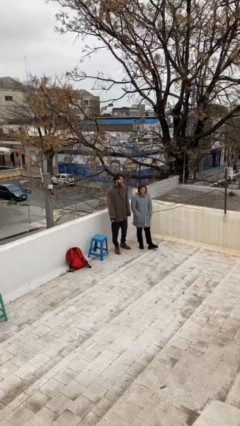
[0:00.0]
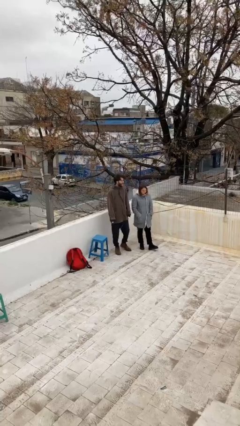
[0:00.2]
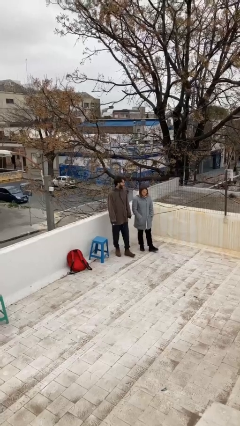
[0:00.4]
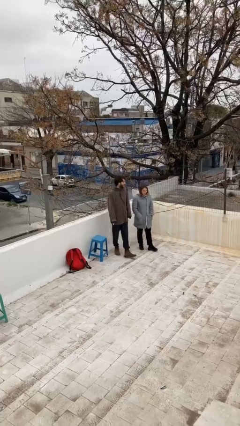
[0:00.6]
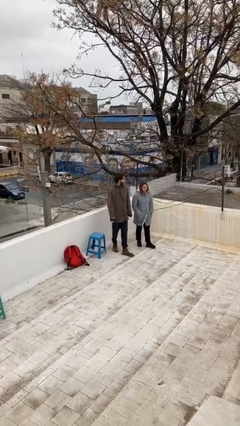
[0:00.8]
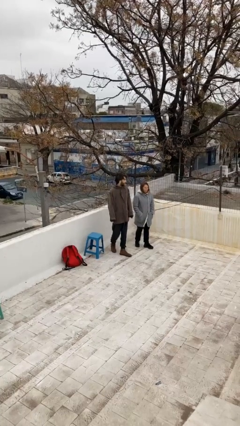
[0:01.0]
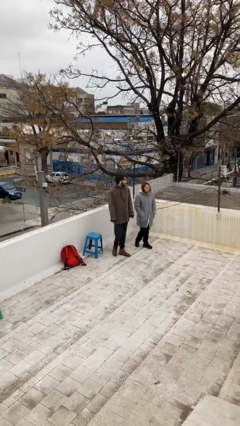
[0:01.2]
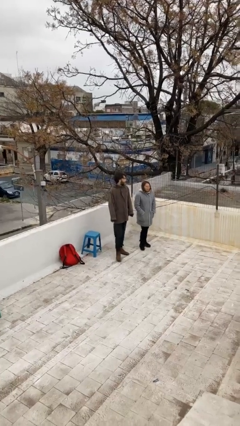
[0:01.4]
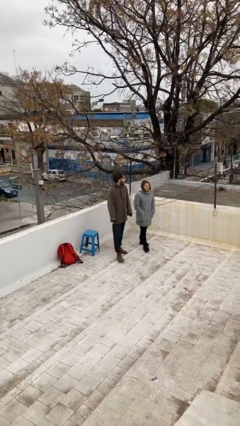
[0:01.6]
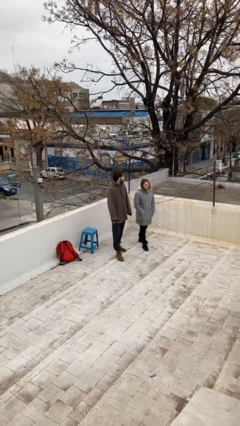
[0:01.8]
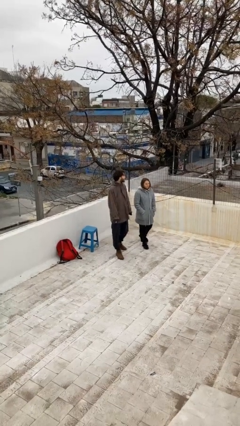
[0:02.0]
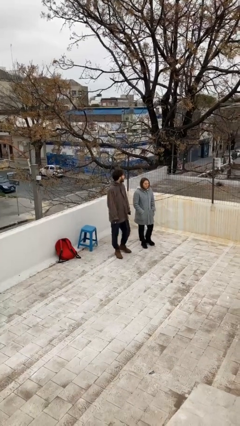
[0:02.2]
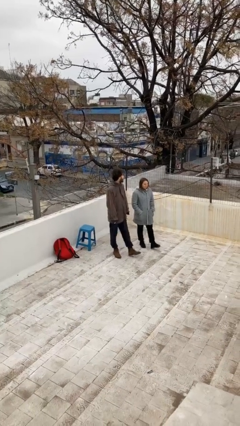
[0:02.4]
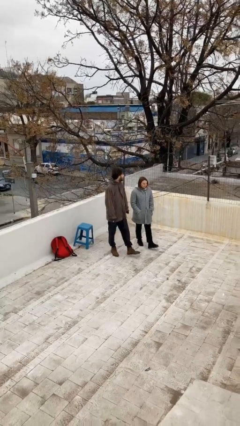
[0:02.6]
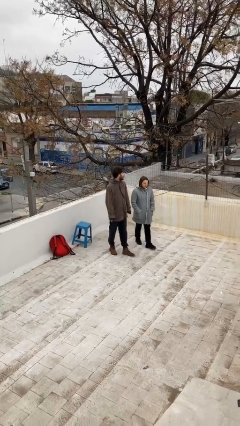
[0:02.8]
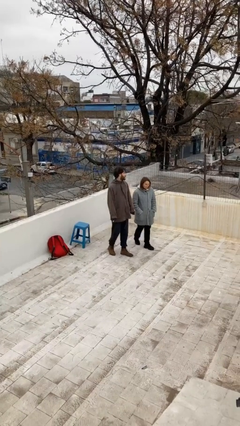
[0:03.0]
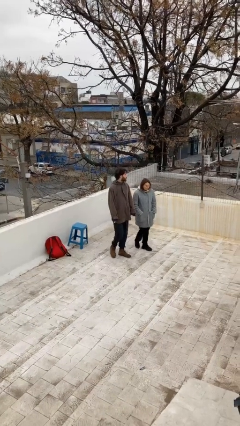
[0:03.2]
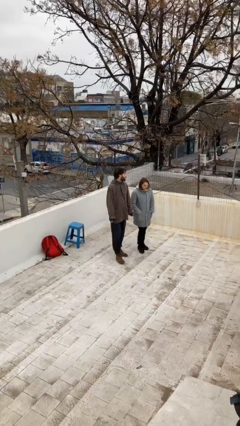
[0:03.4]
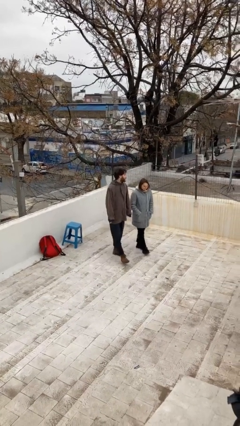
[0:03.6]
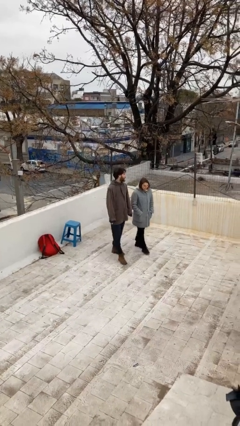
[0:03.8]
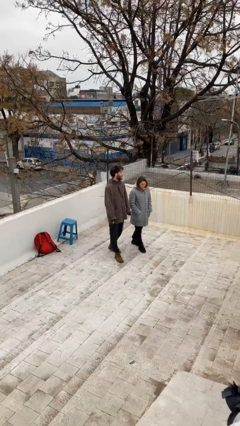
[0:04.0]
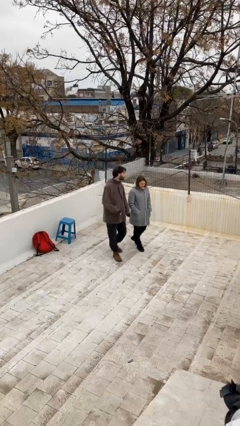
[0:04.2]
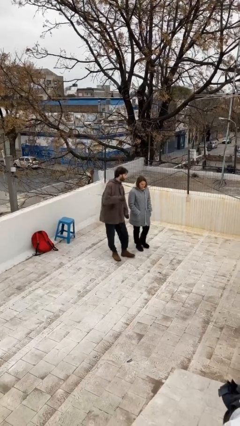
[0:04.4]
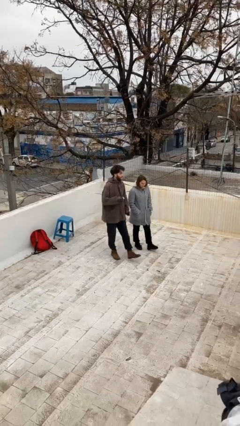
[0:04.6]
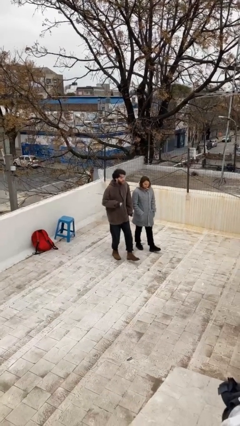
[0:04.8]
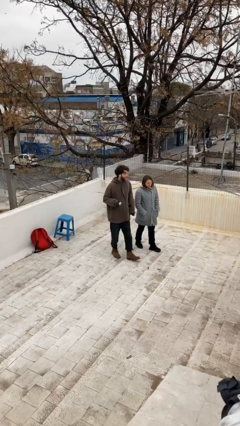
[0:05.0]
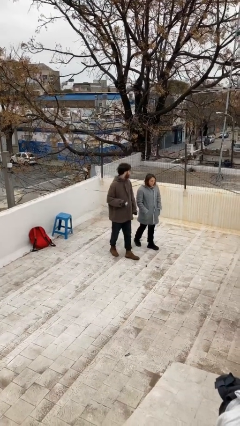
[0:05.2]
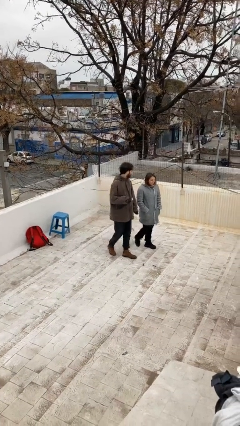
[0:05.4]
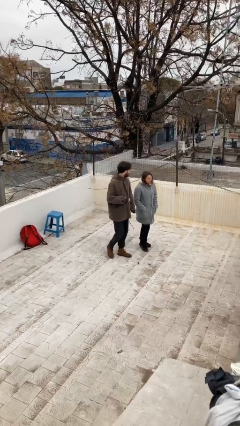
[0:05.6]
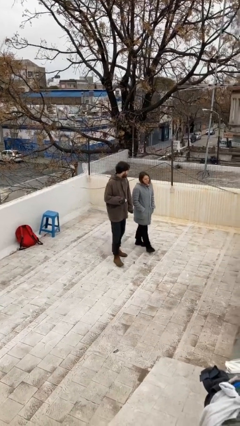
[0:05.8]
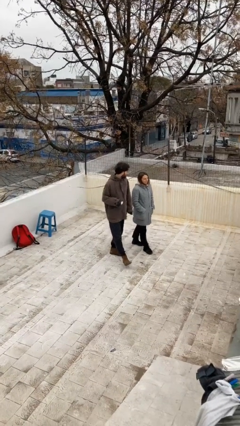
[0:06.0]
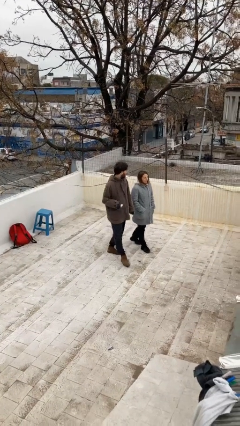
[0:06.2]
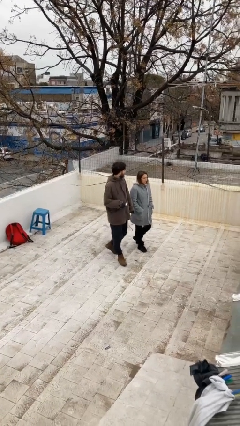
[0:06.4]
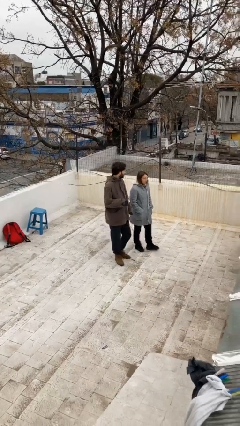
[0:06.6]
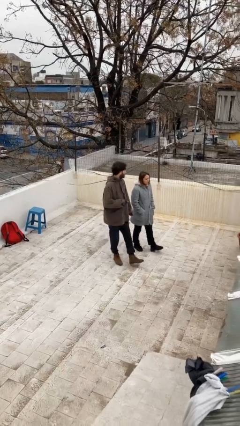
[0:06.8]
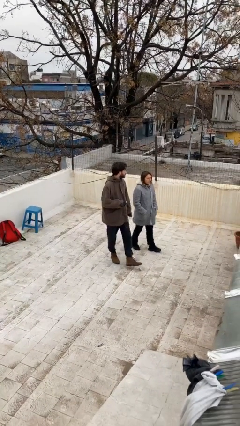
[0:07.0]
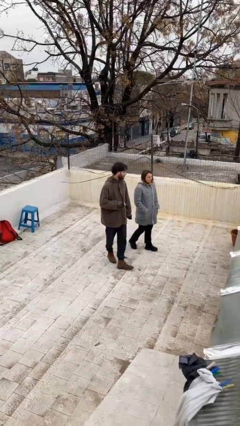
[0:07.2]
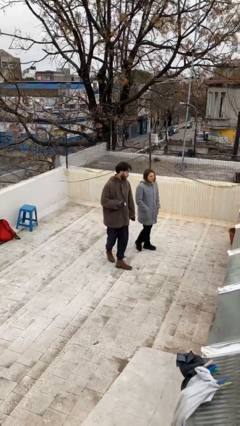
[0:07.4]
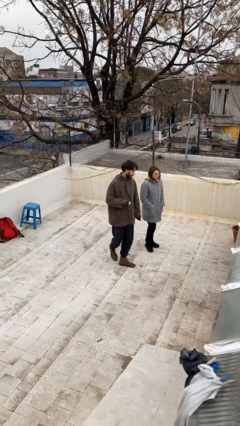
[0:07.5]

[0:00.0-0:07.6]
person talks to person

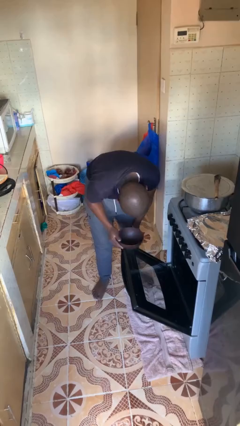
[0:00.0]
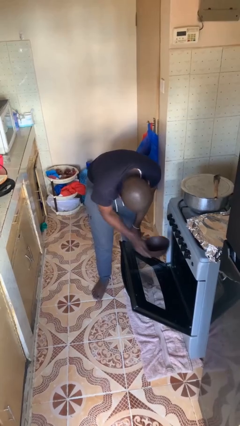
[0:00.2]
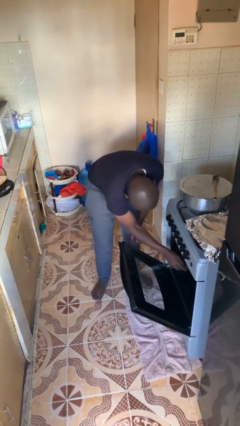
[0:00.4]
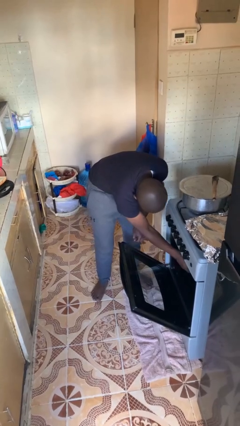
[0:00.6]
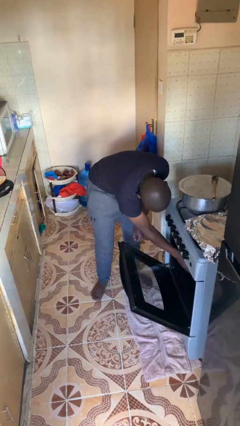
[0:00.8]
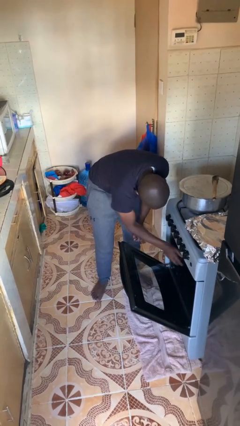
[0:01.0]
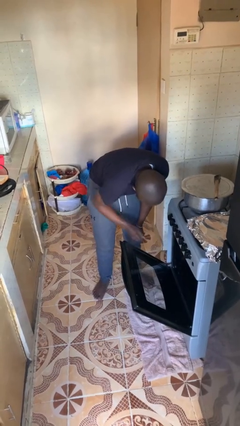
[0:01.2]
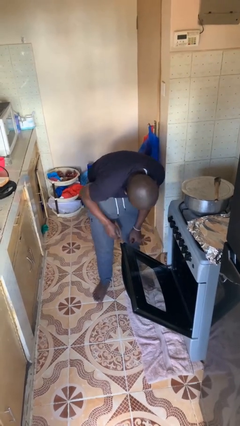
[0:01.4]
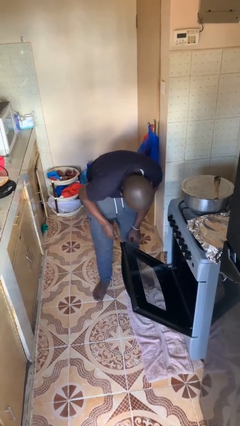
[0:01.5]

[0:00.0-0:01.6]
person puts object into oven

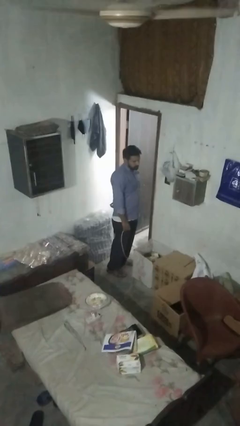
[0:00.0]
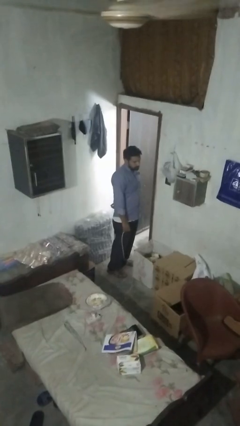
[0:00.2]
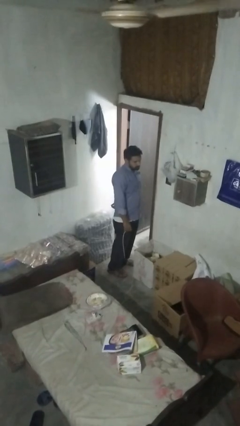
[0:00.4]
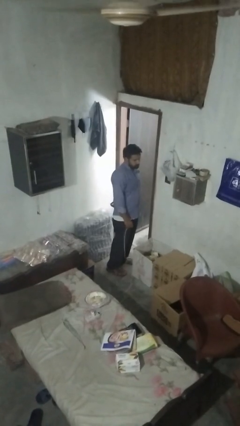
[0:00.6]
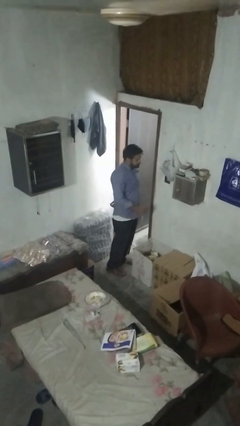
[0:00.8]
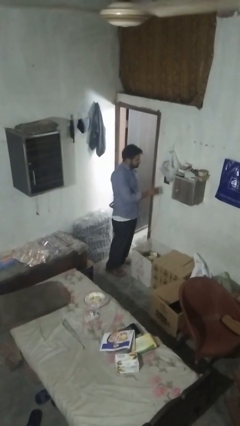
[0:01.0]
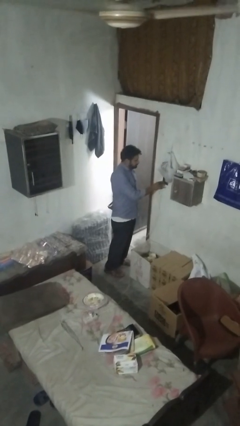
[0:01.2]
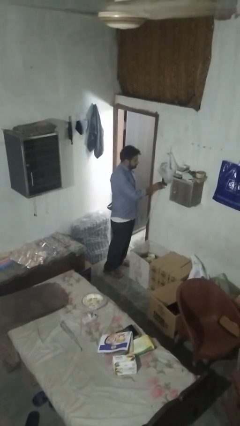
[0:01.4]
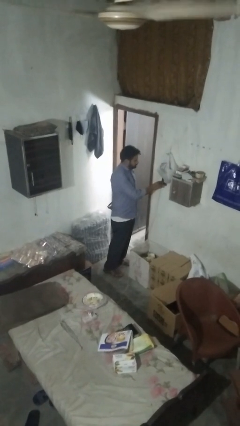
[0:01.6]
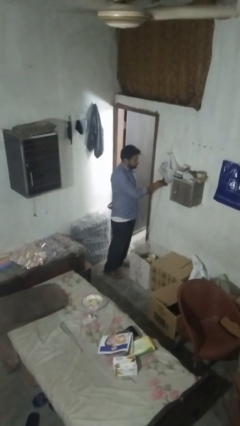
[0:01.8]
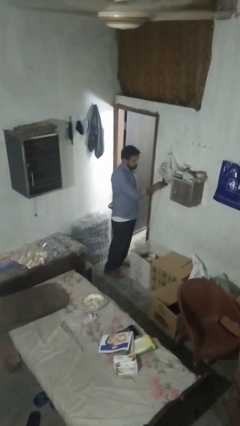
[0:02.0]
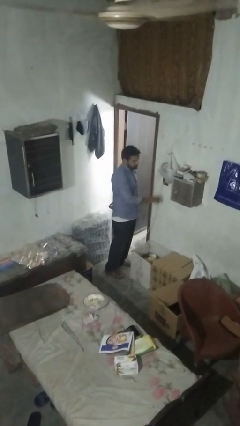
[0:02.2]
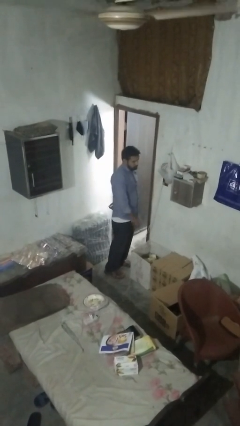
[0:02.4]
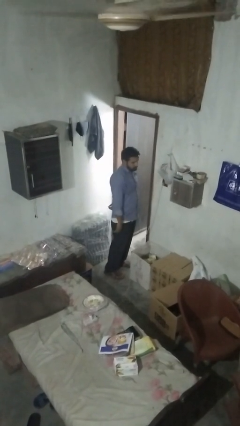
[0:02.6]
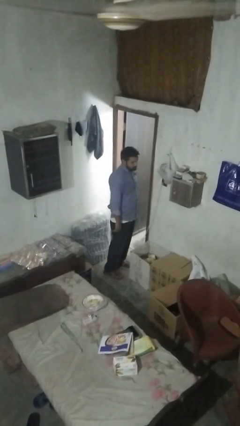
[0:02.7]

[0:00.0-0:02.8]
person plugs into electrical socket

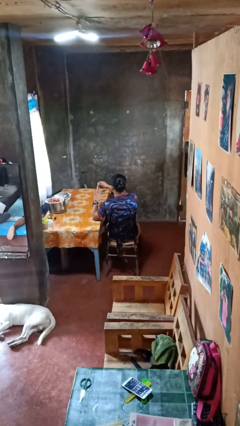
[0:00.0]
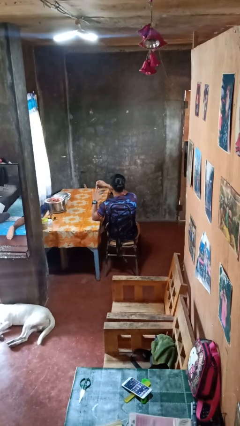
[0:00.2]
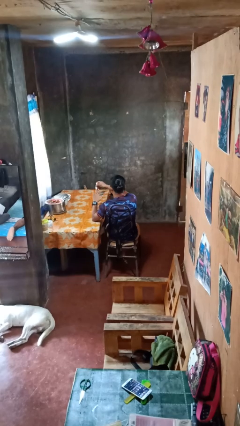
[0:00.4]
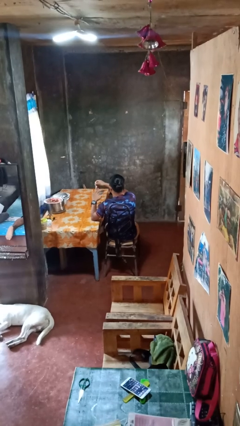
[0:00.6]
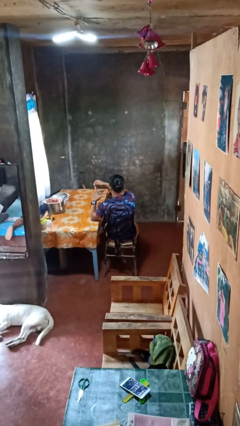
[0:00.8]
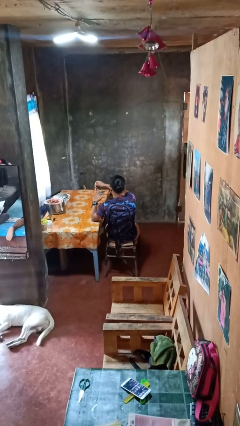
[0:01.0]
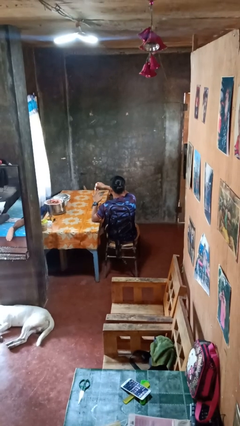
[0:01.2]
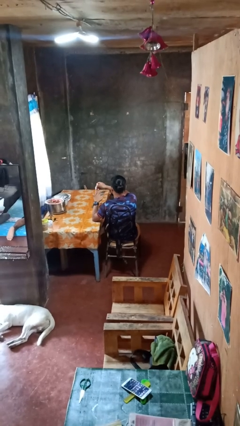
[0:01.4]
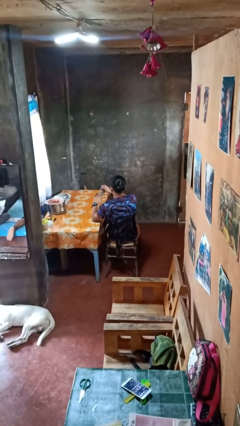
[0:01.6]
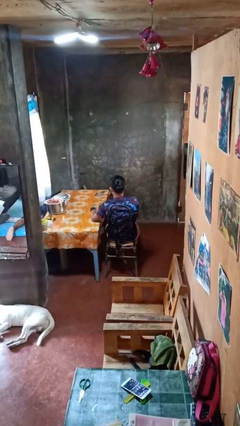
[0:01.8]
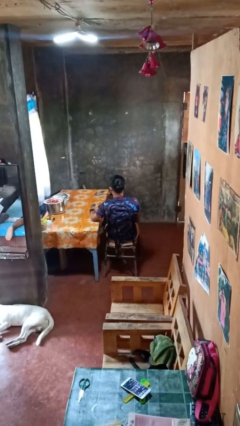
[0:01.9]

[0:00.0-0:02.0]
person clips fingernails

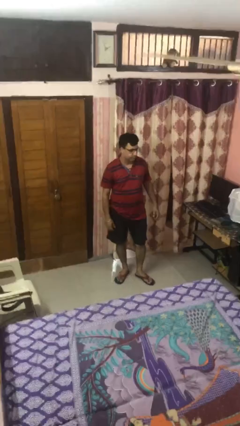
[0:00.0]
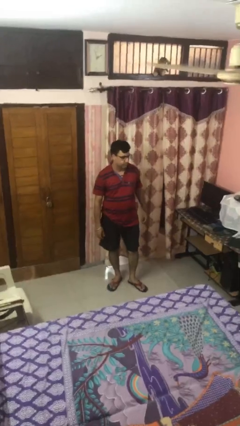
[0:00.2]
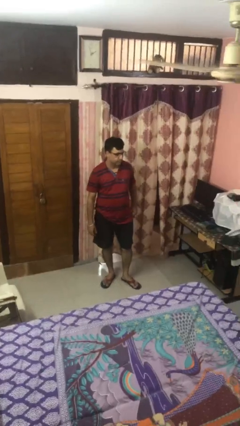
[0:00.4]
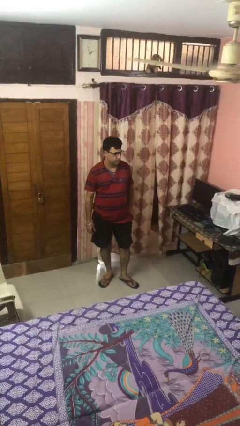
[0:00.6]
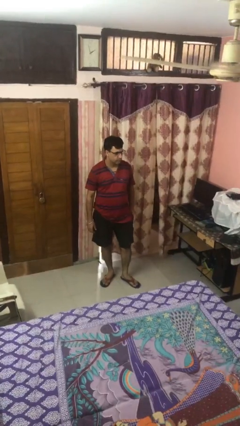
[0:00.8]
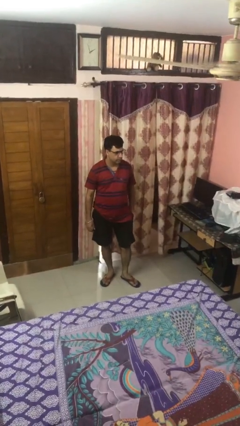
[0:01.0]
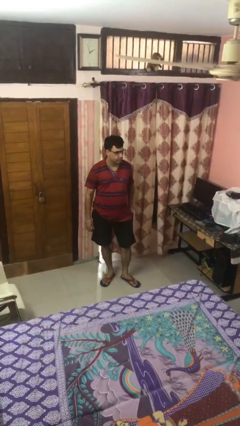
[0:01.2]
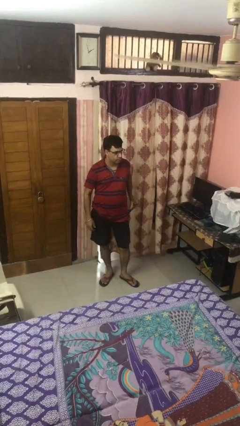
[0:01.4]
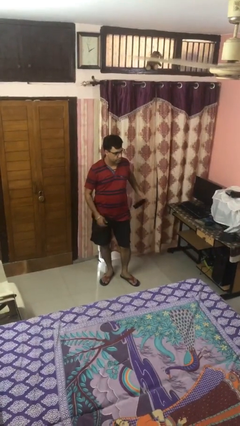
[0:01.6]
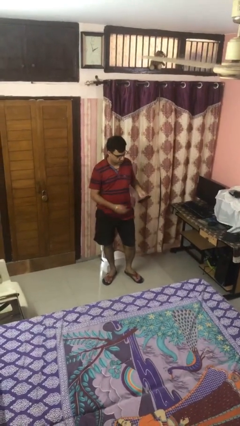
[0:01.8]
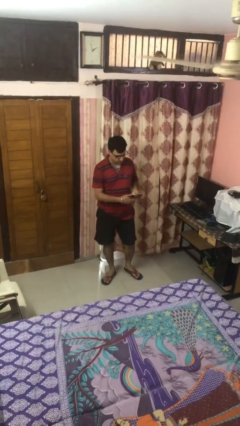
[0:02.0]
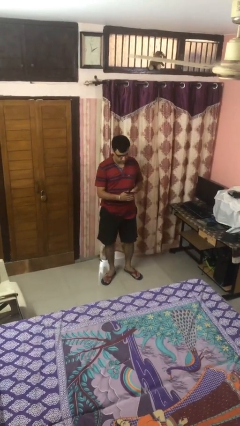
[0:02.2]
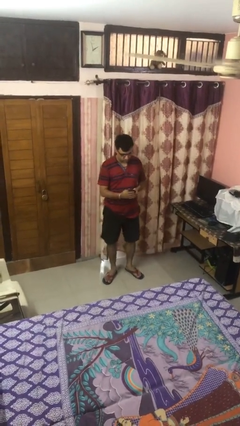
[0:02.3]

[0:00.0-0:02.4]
person takes phone from pocket

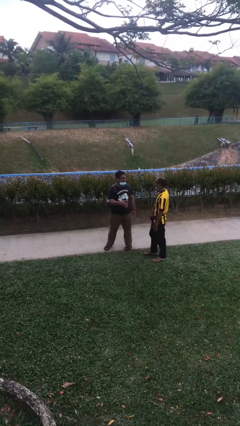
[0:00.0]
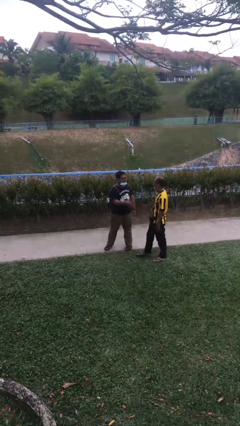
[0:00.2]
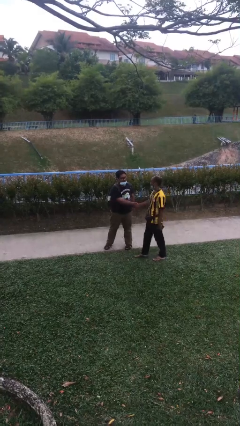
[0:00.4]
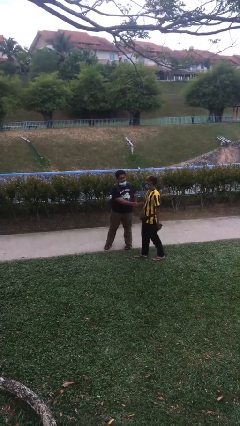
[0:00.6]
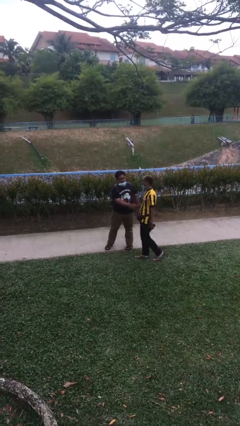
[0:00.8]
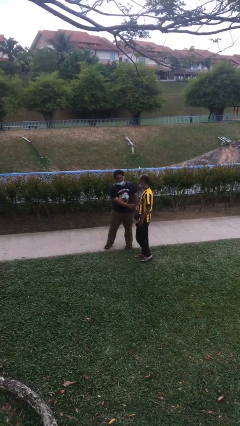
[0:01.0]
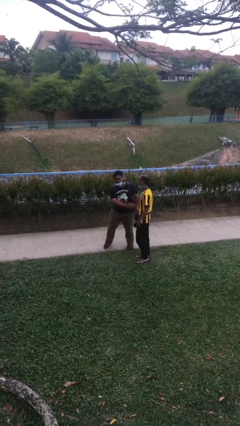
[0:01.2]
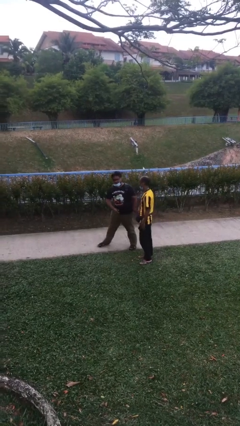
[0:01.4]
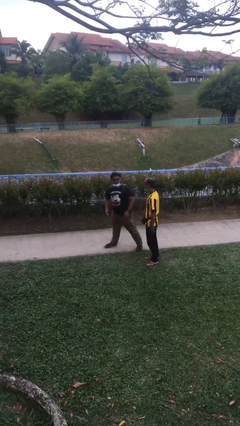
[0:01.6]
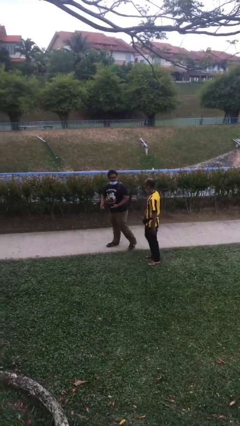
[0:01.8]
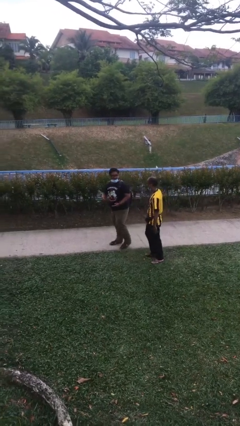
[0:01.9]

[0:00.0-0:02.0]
person shakes hand
